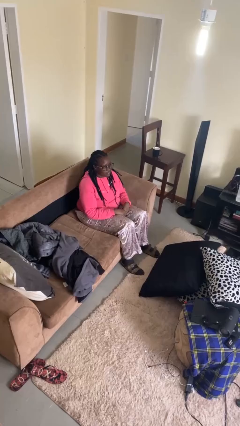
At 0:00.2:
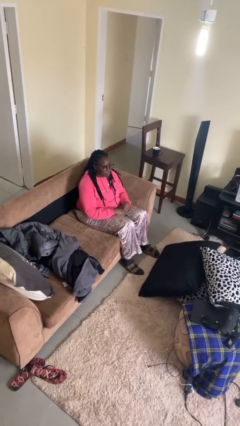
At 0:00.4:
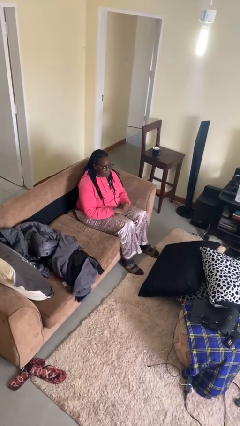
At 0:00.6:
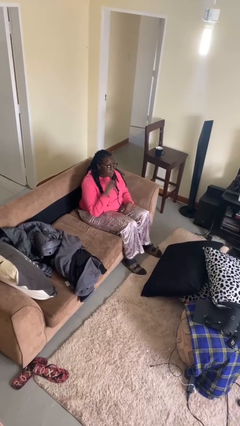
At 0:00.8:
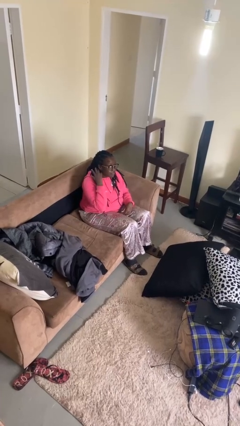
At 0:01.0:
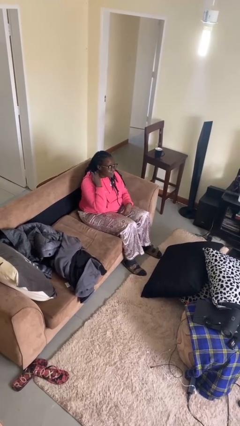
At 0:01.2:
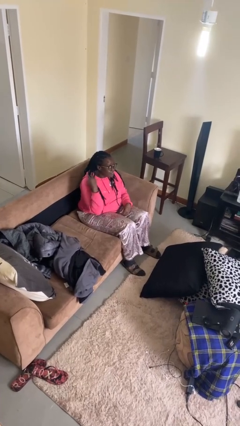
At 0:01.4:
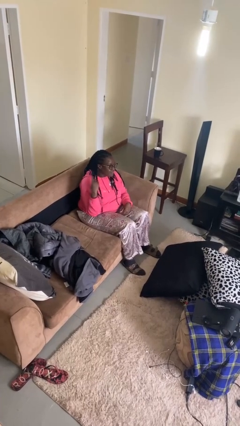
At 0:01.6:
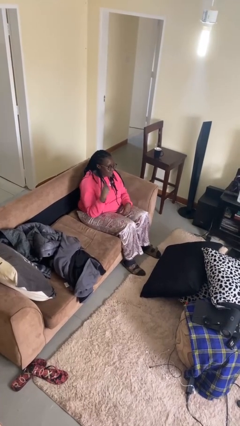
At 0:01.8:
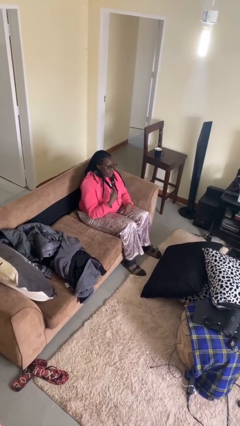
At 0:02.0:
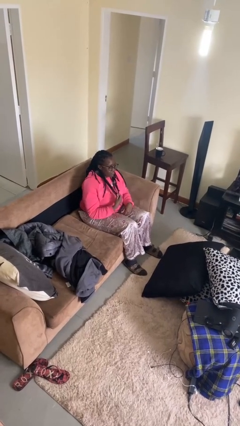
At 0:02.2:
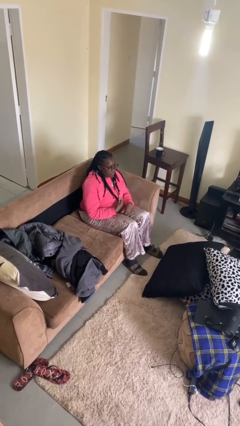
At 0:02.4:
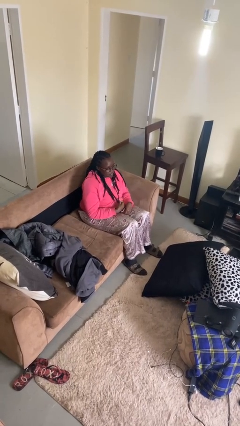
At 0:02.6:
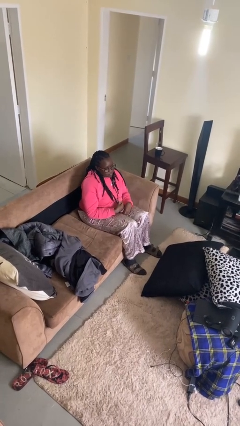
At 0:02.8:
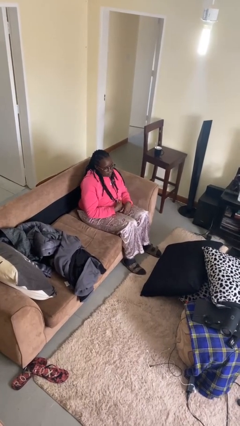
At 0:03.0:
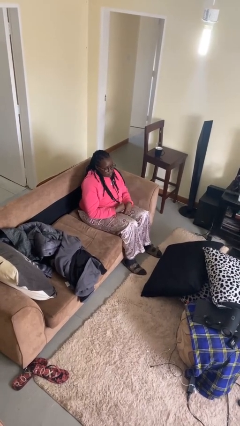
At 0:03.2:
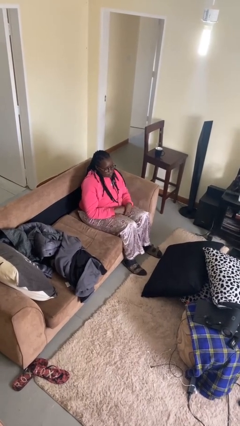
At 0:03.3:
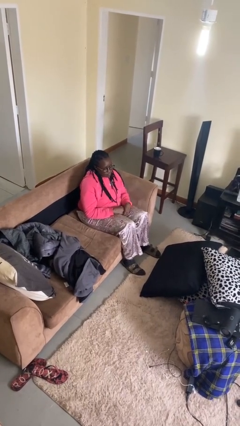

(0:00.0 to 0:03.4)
person strokes hair

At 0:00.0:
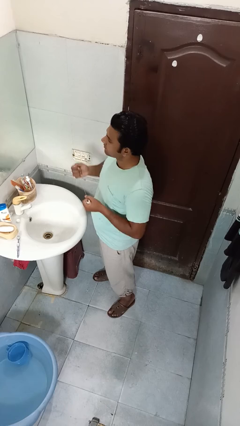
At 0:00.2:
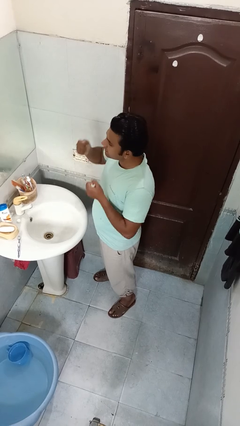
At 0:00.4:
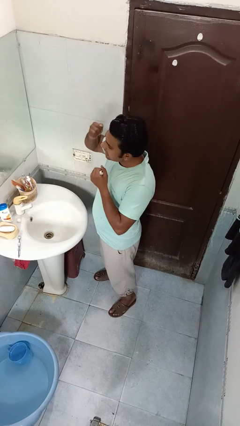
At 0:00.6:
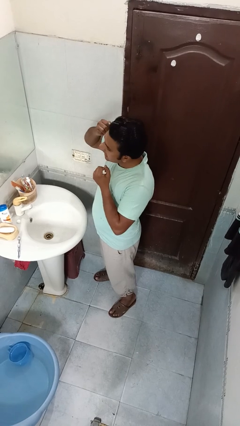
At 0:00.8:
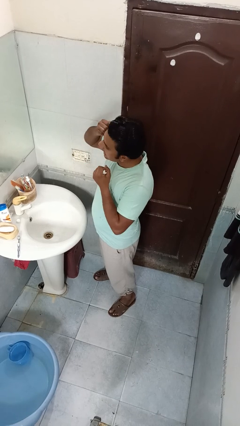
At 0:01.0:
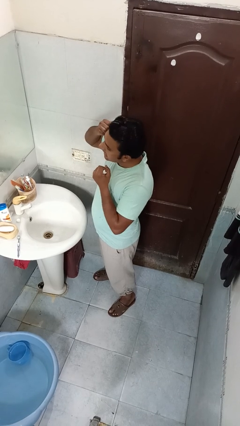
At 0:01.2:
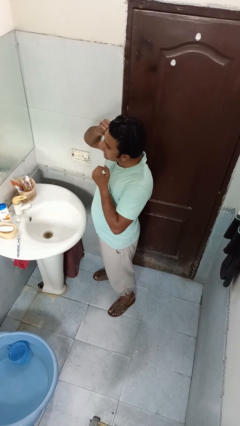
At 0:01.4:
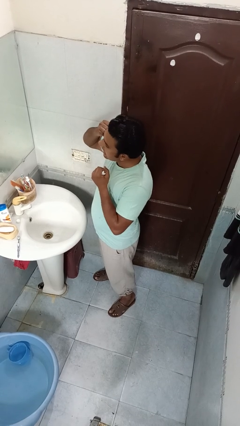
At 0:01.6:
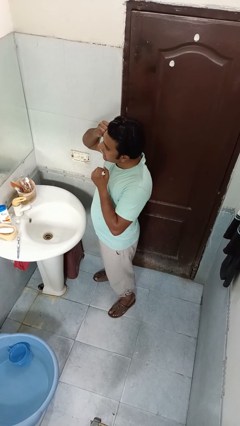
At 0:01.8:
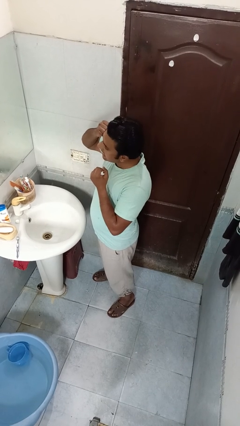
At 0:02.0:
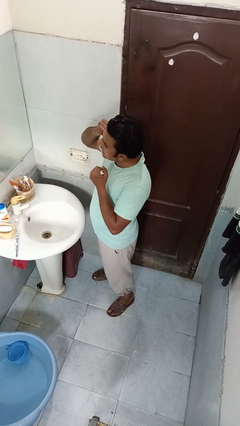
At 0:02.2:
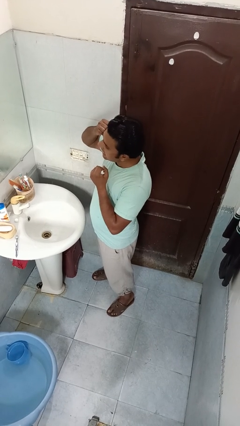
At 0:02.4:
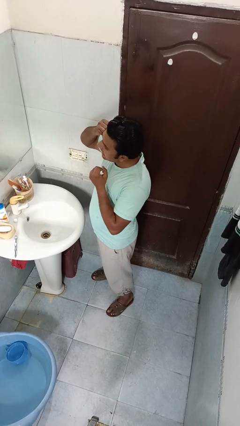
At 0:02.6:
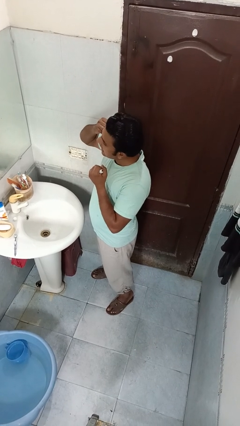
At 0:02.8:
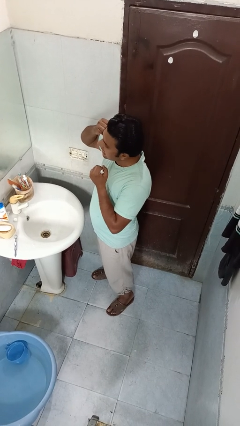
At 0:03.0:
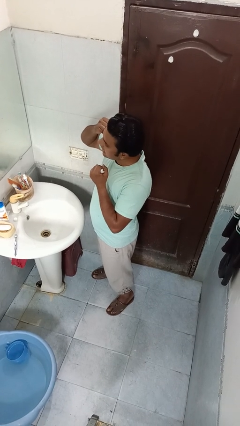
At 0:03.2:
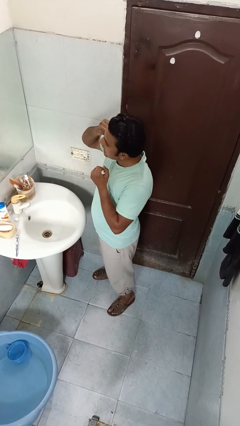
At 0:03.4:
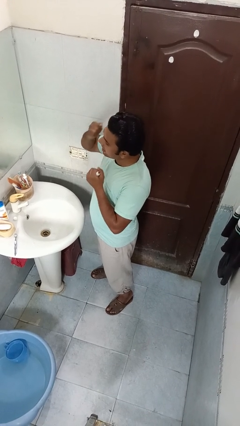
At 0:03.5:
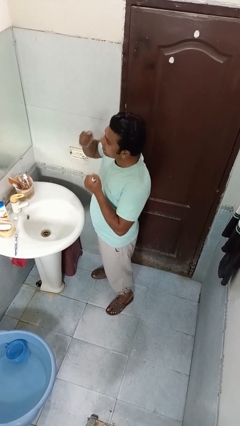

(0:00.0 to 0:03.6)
person flosses

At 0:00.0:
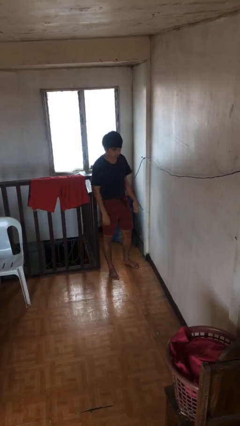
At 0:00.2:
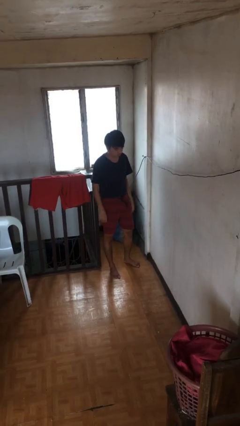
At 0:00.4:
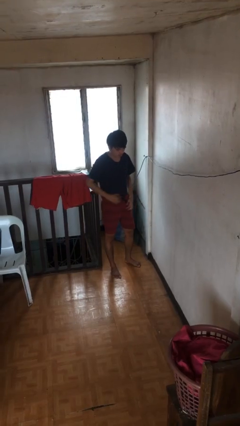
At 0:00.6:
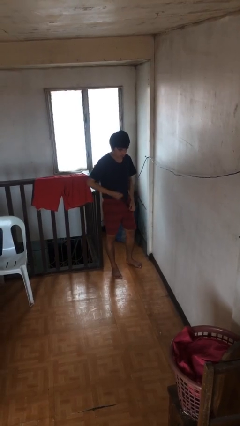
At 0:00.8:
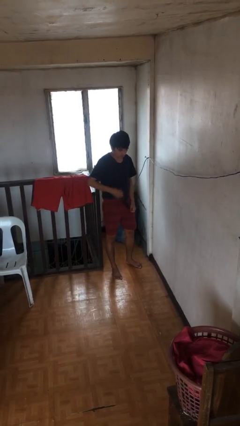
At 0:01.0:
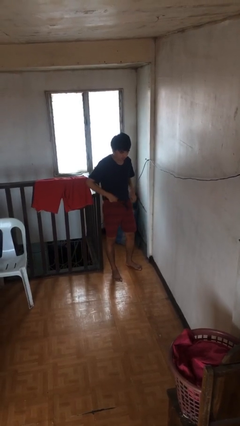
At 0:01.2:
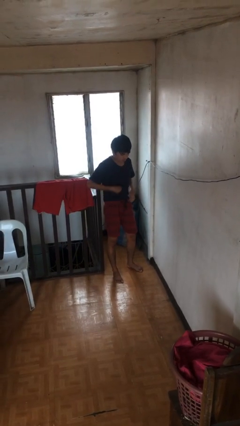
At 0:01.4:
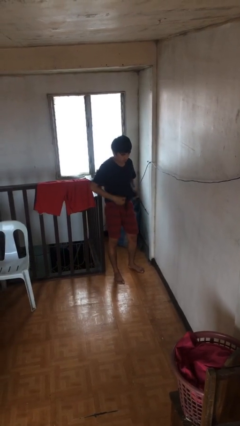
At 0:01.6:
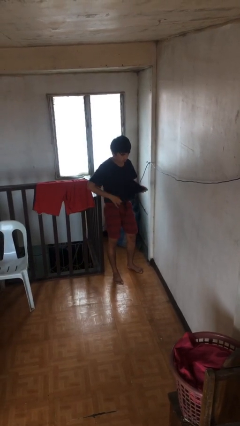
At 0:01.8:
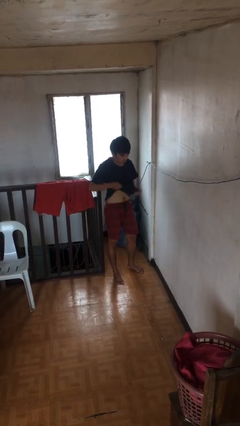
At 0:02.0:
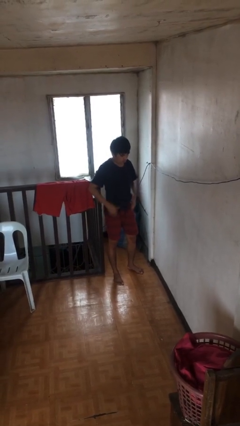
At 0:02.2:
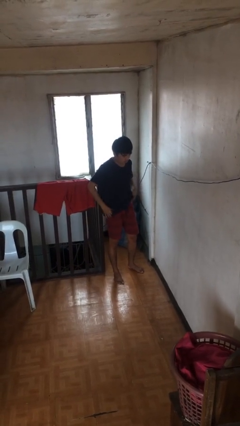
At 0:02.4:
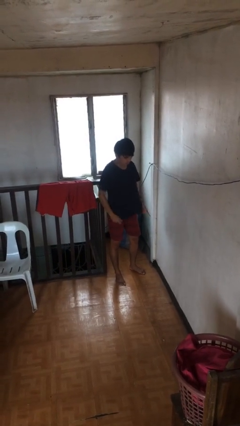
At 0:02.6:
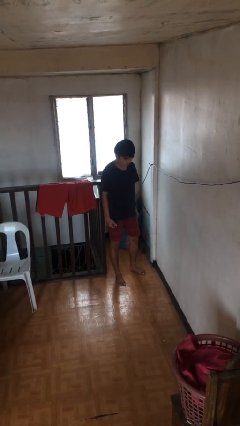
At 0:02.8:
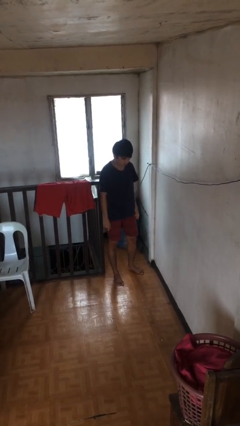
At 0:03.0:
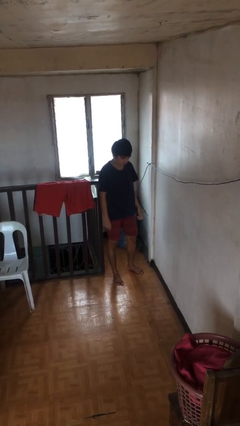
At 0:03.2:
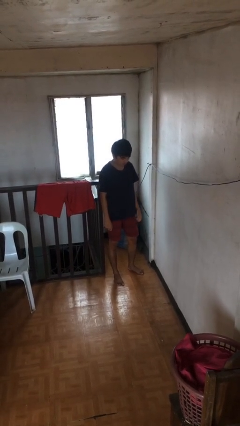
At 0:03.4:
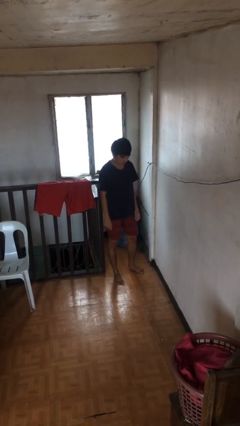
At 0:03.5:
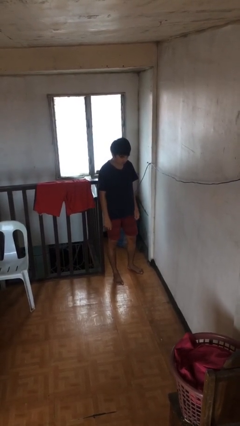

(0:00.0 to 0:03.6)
person untucks shirt

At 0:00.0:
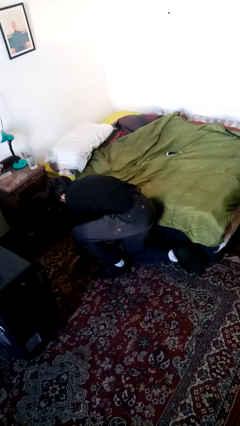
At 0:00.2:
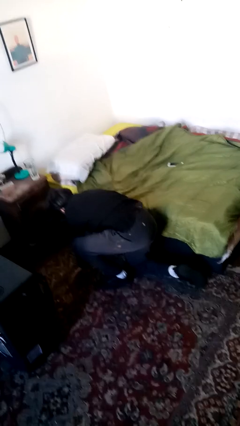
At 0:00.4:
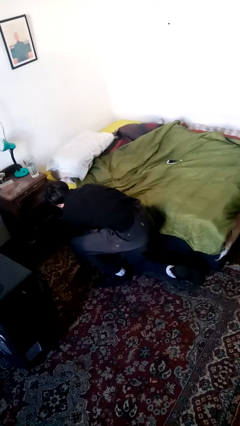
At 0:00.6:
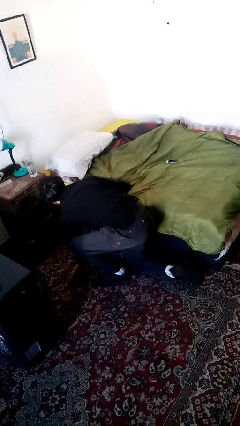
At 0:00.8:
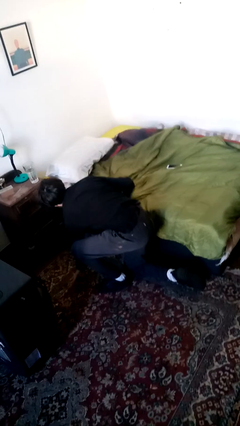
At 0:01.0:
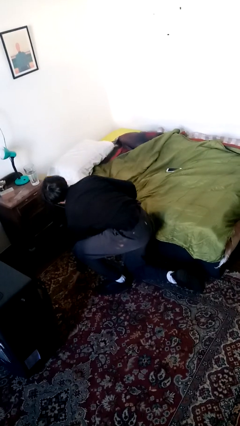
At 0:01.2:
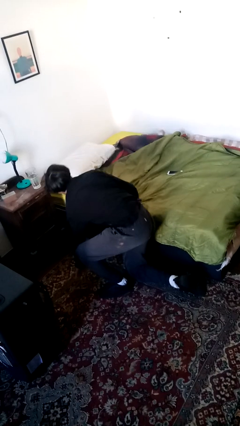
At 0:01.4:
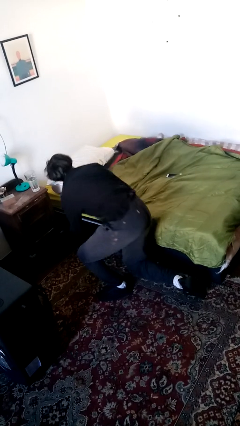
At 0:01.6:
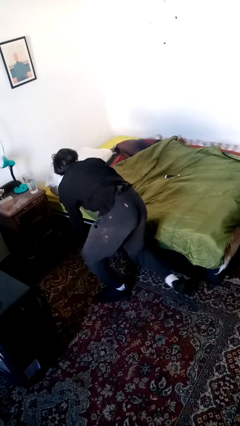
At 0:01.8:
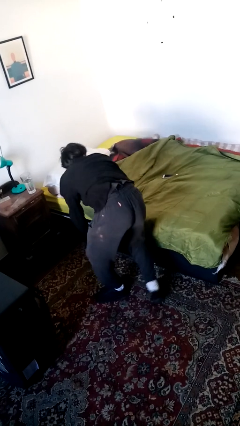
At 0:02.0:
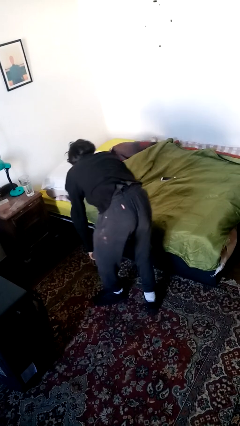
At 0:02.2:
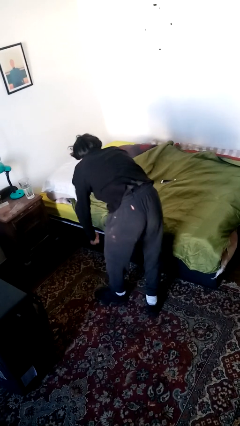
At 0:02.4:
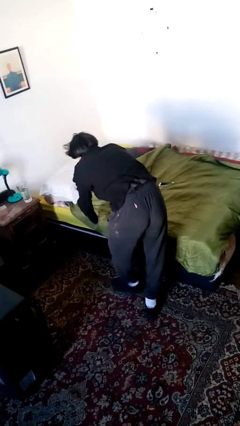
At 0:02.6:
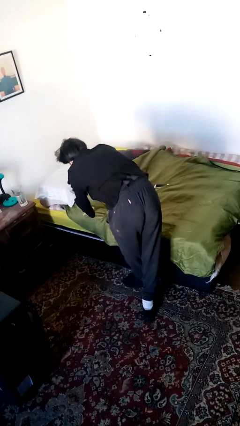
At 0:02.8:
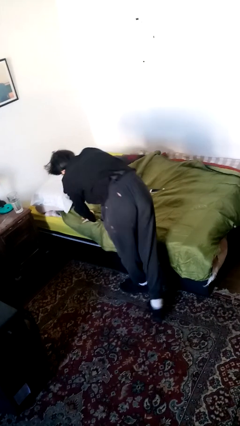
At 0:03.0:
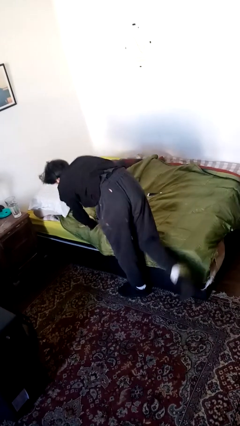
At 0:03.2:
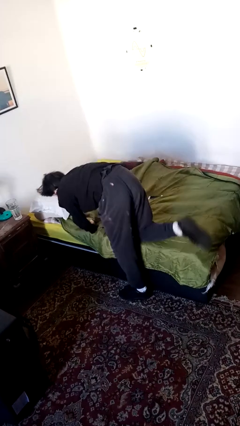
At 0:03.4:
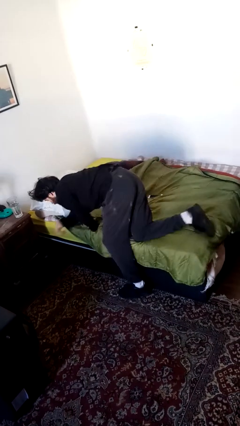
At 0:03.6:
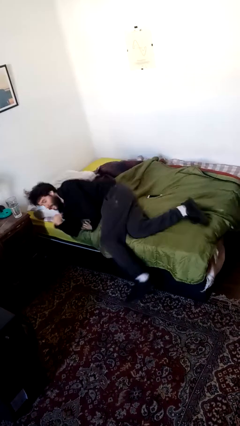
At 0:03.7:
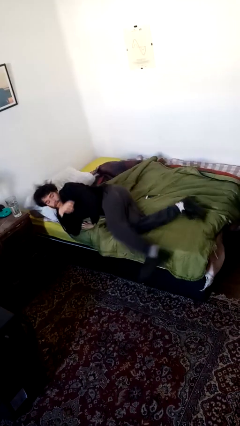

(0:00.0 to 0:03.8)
person stands up from floor

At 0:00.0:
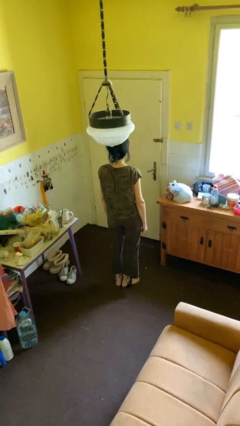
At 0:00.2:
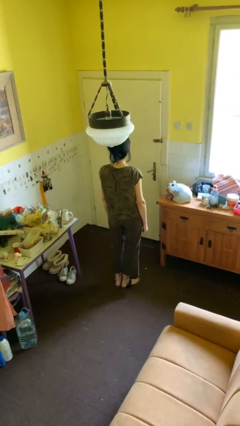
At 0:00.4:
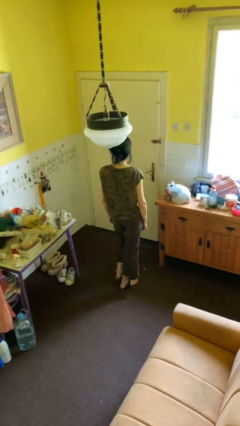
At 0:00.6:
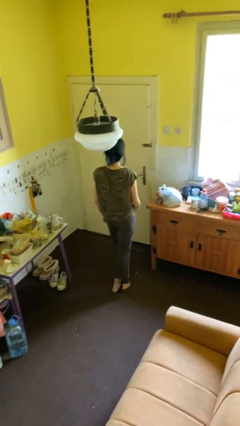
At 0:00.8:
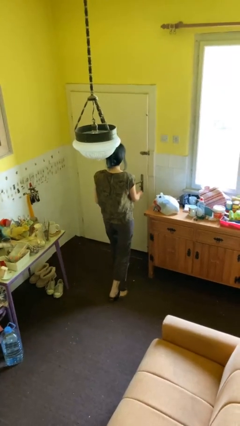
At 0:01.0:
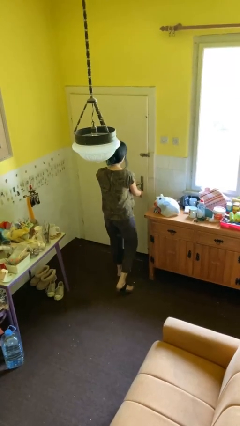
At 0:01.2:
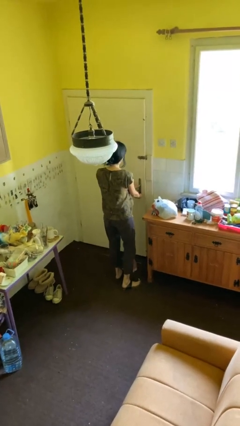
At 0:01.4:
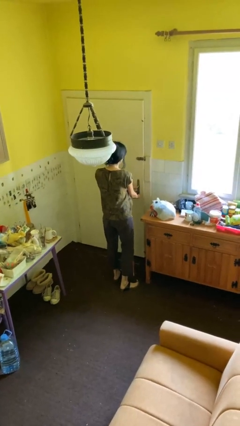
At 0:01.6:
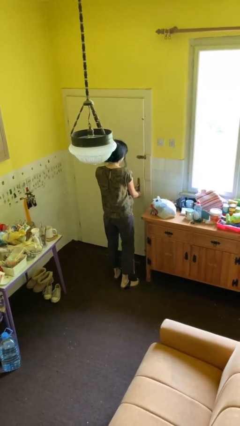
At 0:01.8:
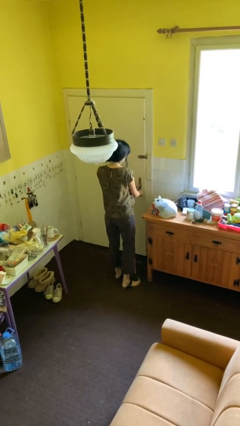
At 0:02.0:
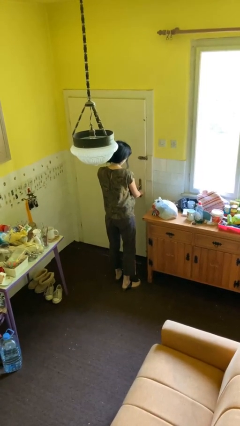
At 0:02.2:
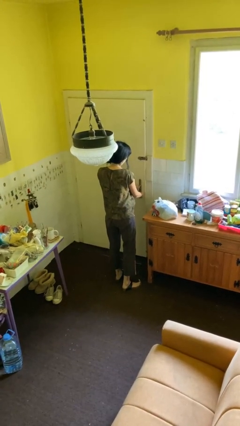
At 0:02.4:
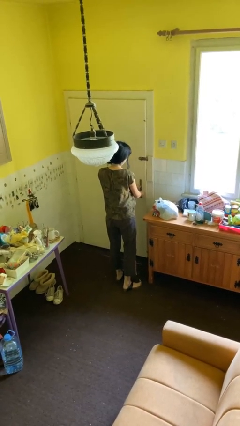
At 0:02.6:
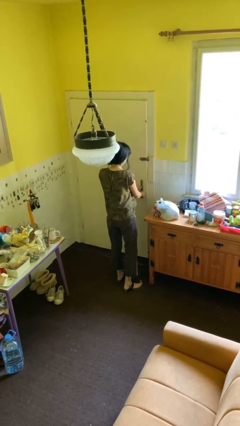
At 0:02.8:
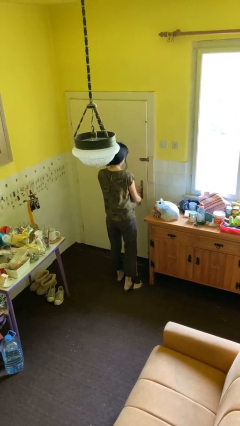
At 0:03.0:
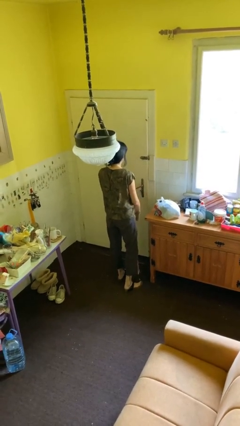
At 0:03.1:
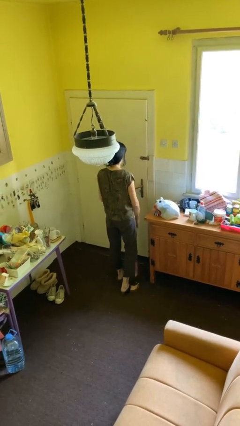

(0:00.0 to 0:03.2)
person unlocks door with keys
